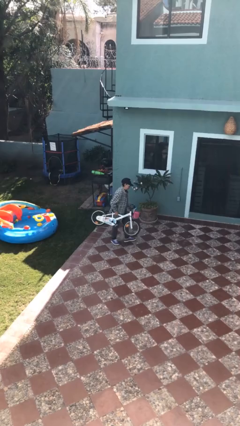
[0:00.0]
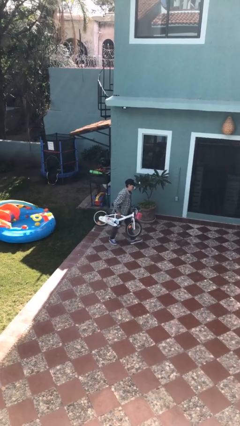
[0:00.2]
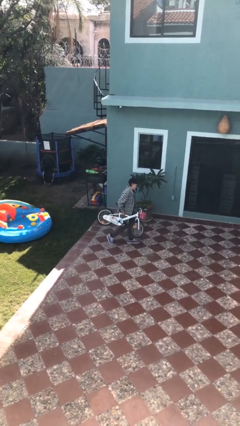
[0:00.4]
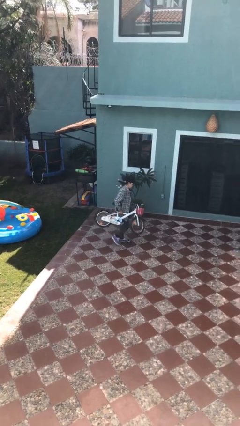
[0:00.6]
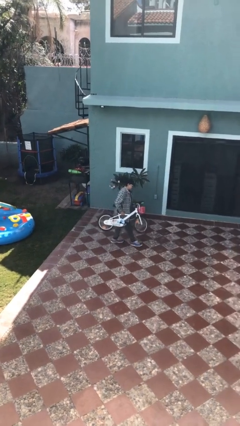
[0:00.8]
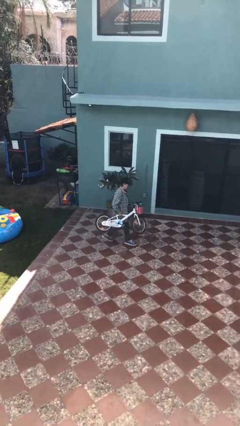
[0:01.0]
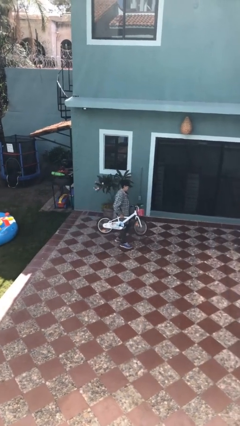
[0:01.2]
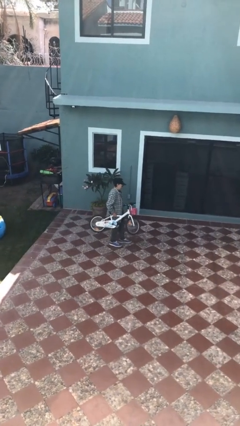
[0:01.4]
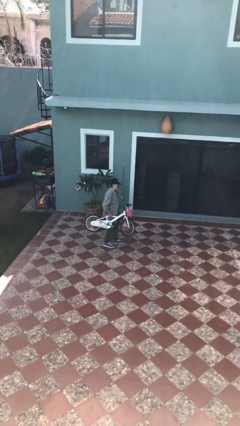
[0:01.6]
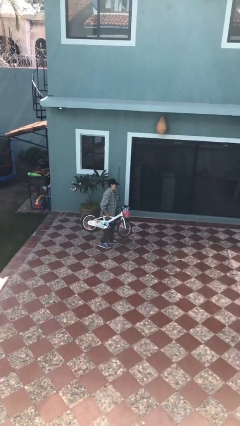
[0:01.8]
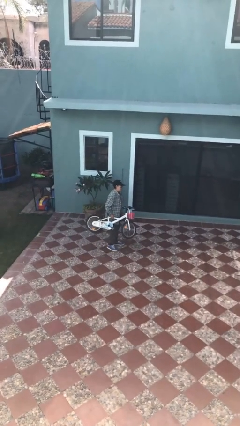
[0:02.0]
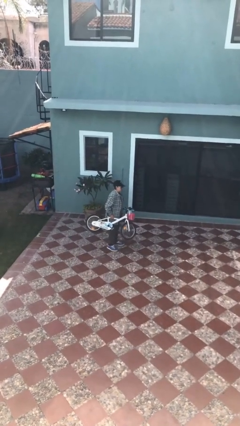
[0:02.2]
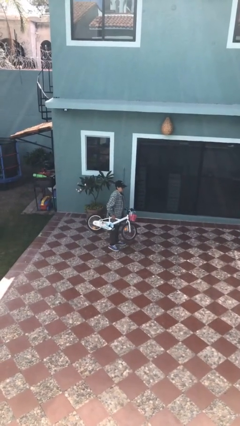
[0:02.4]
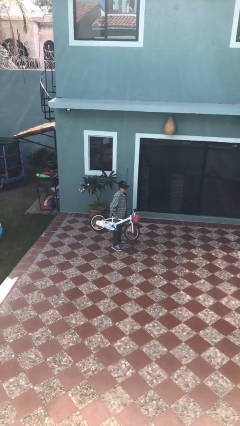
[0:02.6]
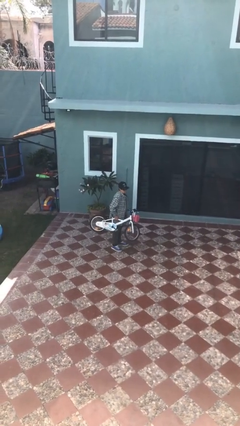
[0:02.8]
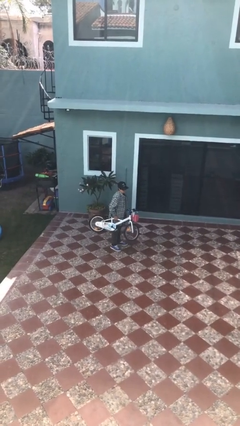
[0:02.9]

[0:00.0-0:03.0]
person carries bicycle

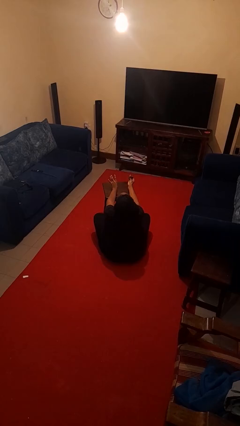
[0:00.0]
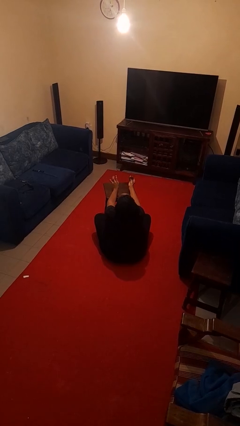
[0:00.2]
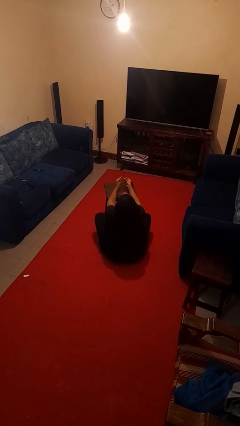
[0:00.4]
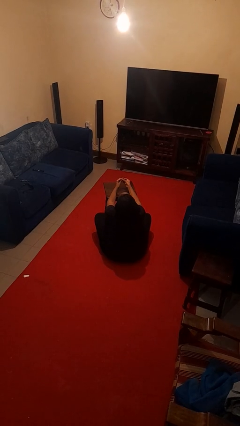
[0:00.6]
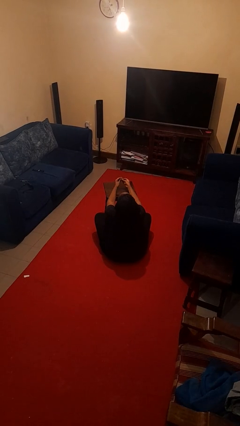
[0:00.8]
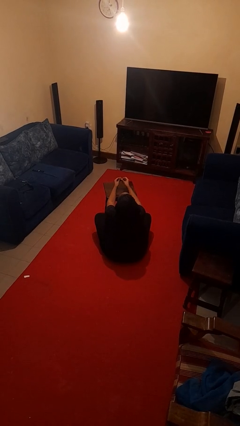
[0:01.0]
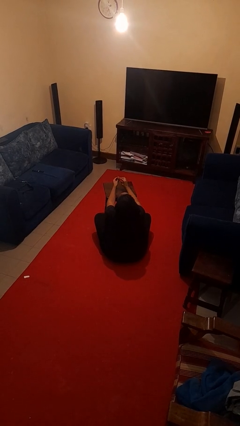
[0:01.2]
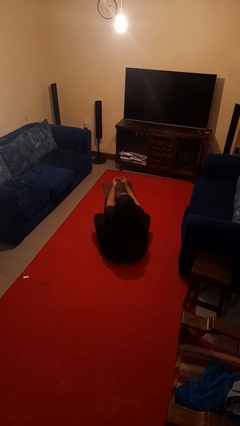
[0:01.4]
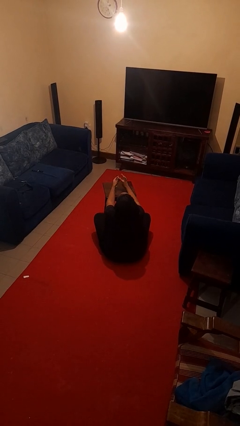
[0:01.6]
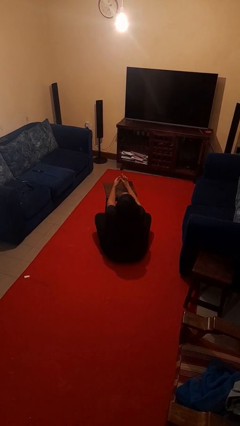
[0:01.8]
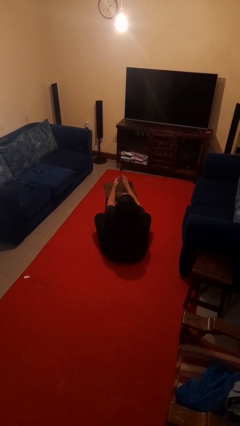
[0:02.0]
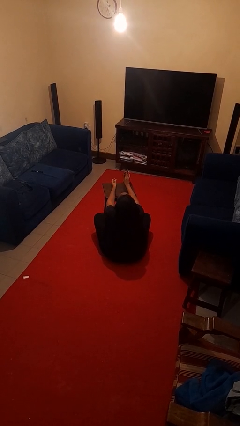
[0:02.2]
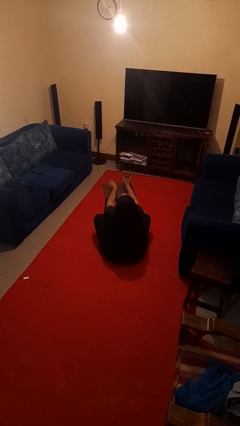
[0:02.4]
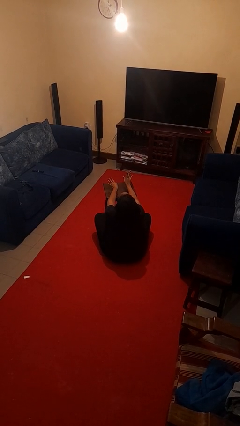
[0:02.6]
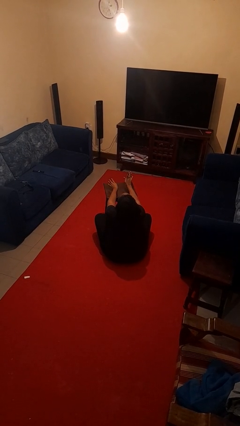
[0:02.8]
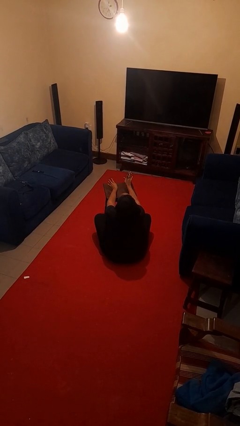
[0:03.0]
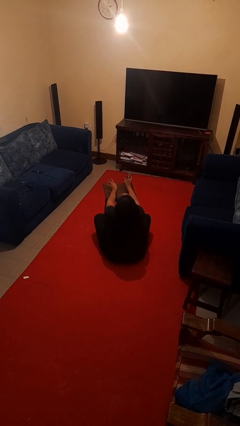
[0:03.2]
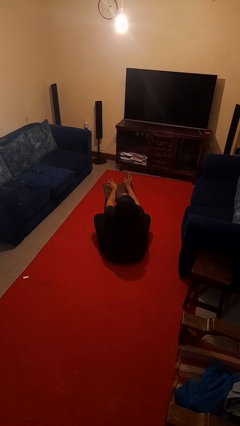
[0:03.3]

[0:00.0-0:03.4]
person puts on ring

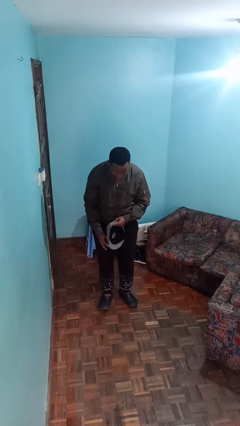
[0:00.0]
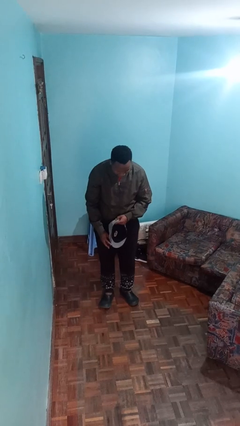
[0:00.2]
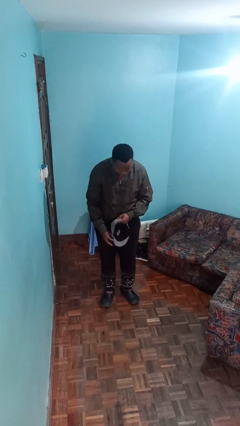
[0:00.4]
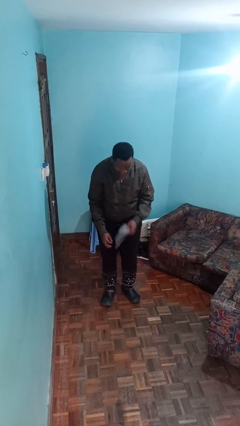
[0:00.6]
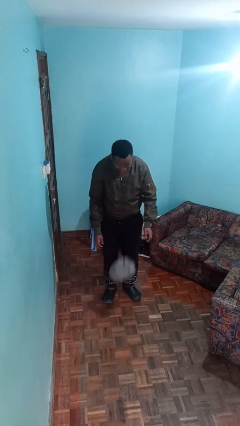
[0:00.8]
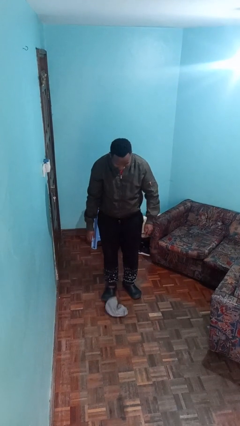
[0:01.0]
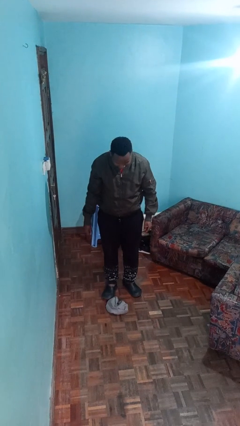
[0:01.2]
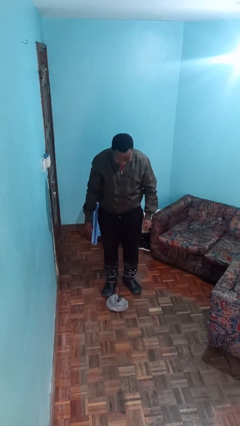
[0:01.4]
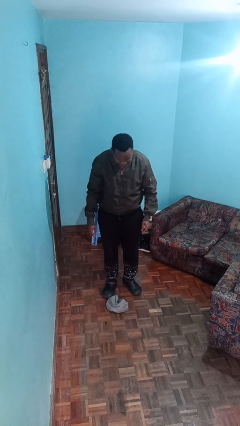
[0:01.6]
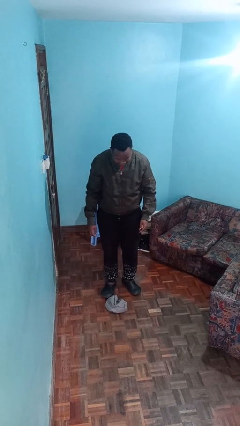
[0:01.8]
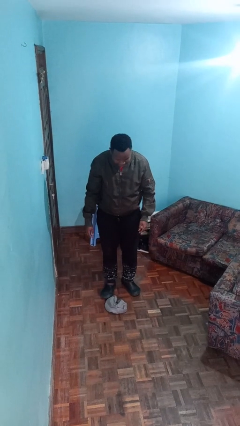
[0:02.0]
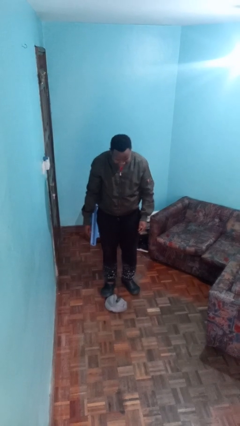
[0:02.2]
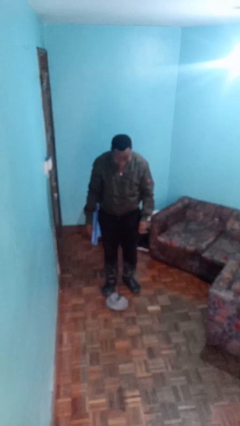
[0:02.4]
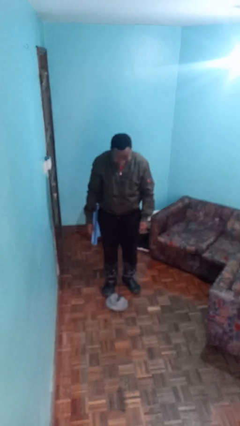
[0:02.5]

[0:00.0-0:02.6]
person drops object

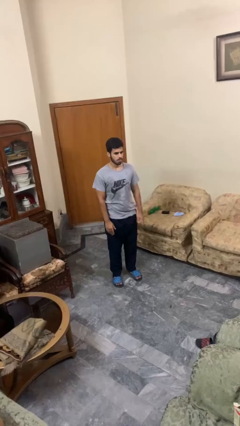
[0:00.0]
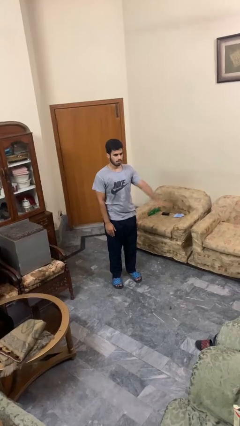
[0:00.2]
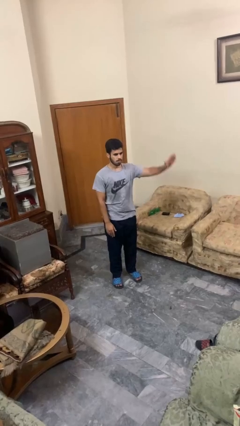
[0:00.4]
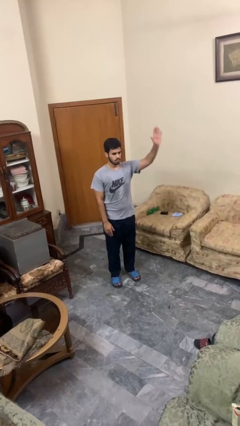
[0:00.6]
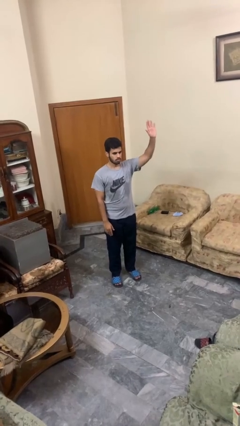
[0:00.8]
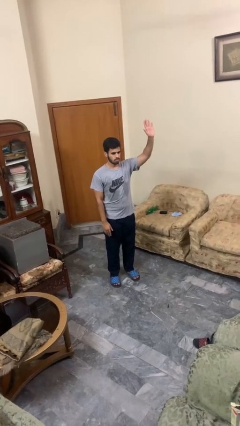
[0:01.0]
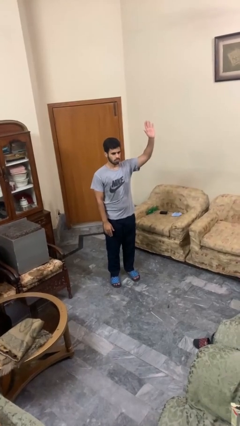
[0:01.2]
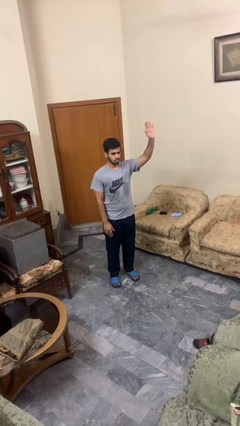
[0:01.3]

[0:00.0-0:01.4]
person gestures raise hand

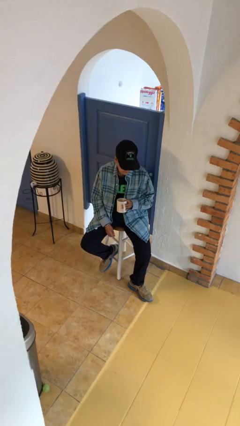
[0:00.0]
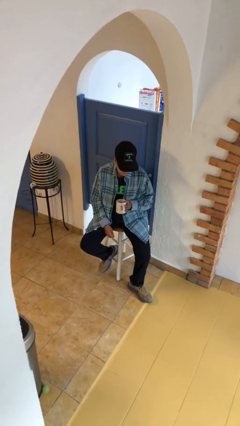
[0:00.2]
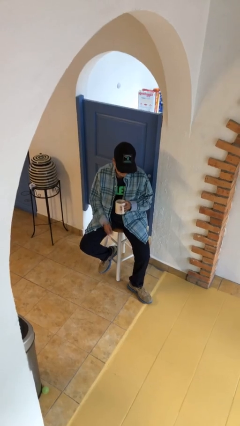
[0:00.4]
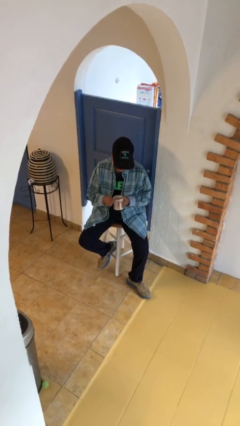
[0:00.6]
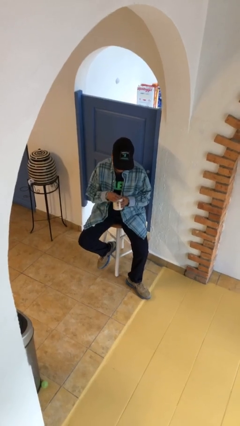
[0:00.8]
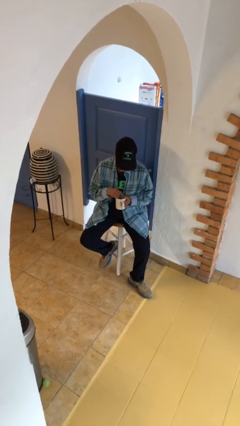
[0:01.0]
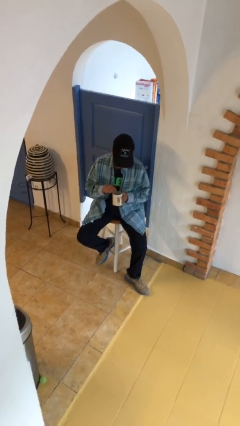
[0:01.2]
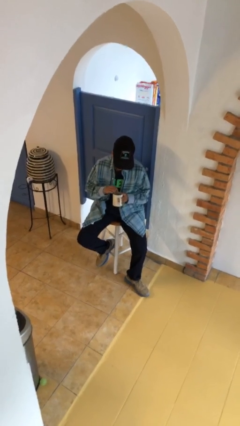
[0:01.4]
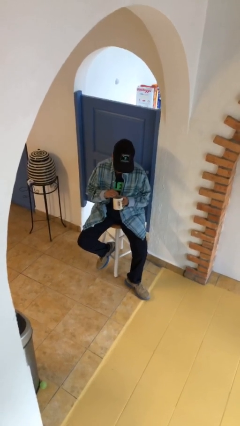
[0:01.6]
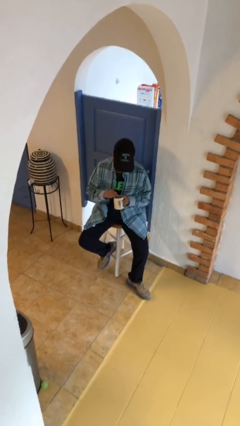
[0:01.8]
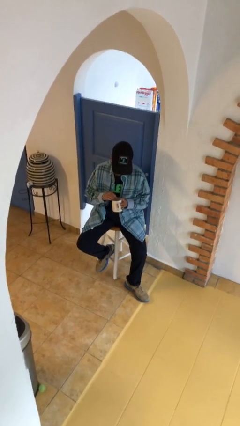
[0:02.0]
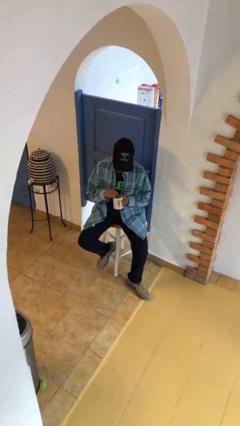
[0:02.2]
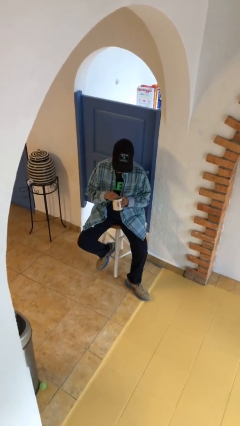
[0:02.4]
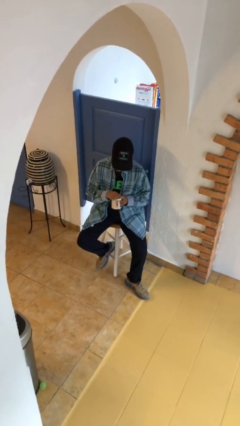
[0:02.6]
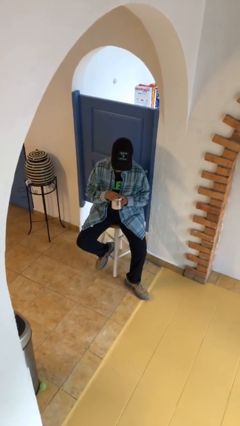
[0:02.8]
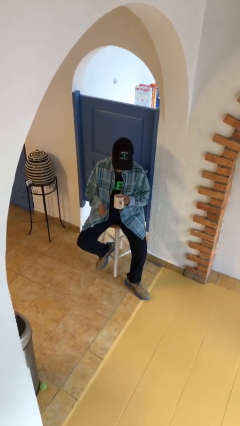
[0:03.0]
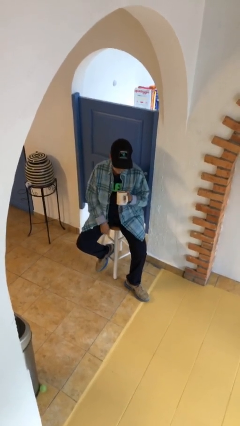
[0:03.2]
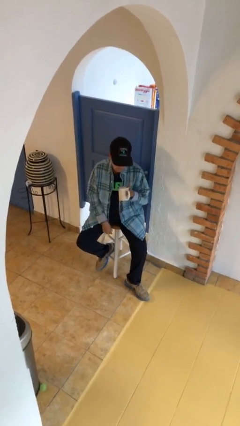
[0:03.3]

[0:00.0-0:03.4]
person stirs mug

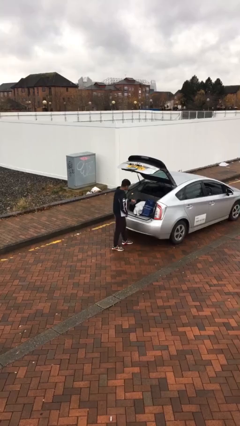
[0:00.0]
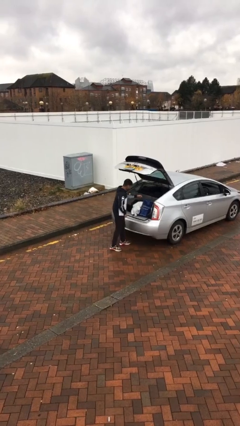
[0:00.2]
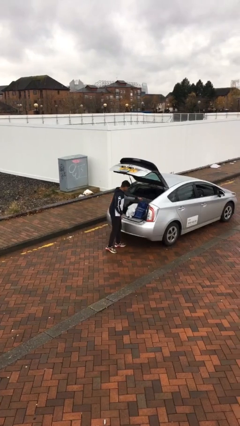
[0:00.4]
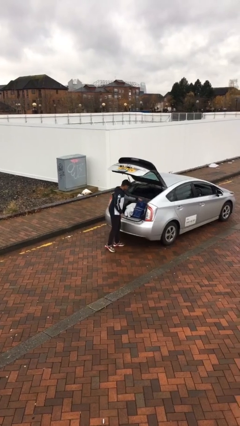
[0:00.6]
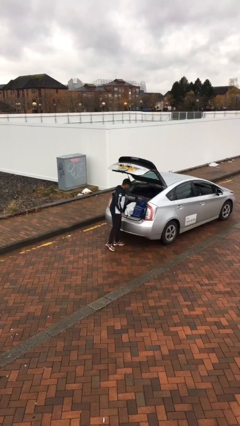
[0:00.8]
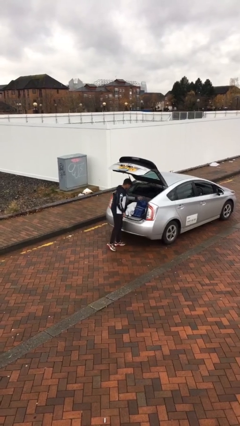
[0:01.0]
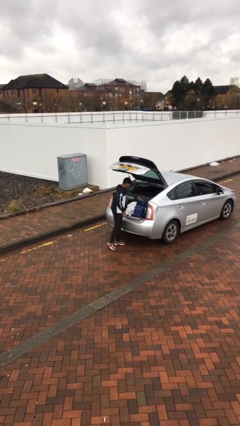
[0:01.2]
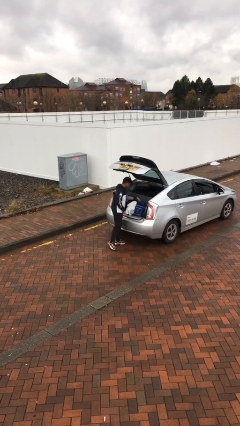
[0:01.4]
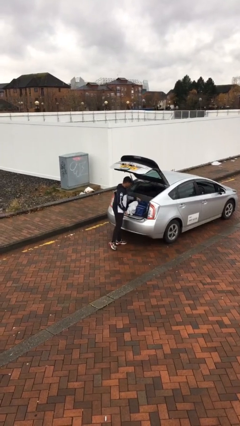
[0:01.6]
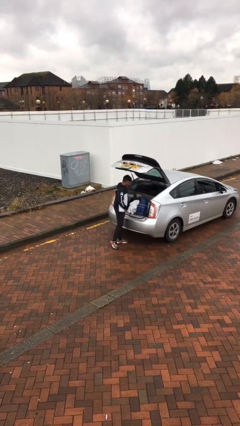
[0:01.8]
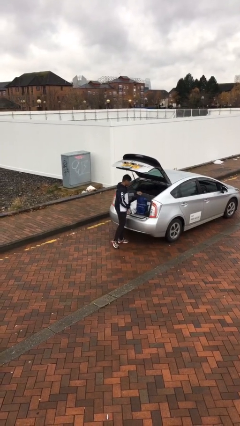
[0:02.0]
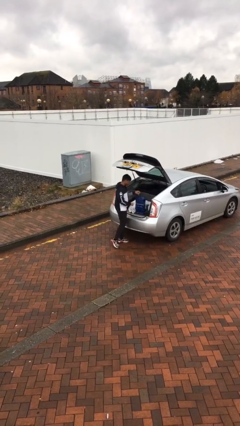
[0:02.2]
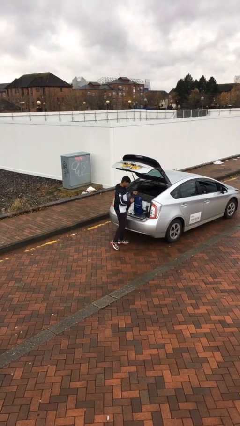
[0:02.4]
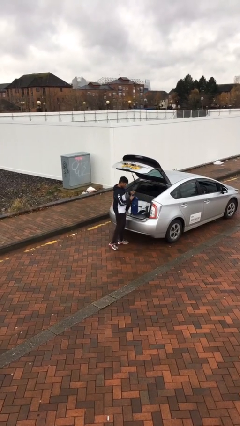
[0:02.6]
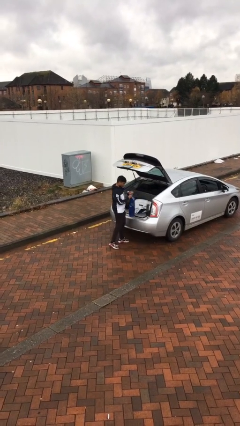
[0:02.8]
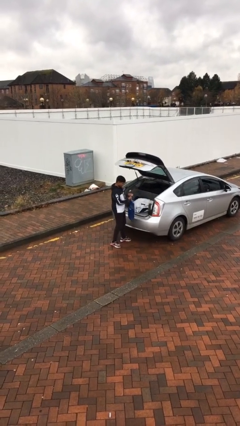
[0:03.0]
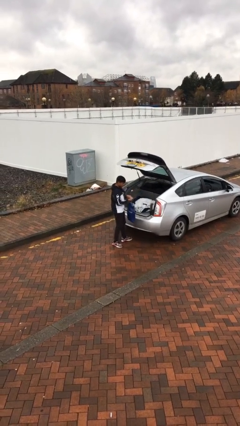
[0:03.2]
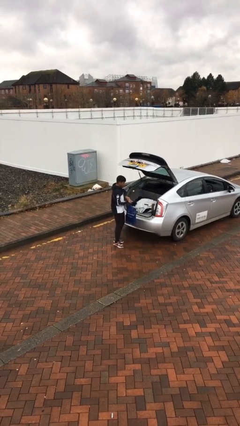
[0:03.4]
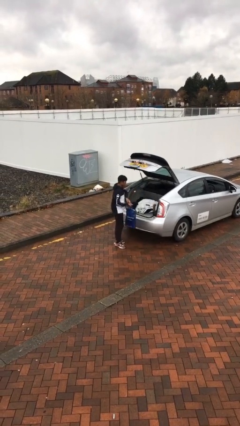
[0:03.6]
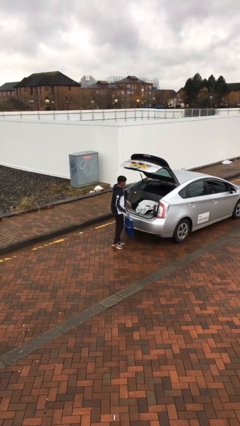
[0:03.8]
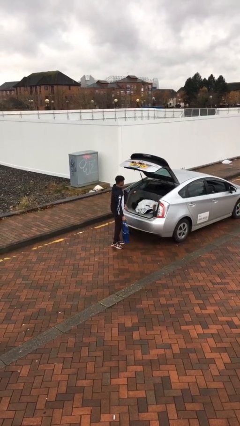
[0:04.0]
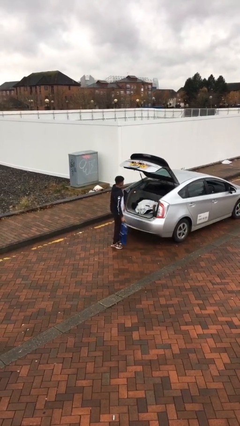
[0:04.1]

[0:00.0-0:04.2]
person unloads car
